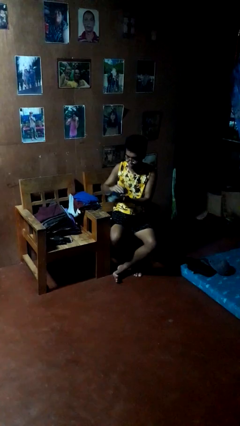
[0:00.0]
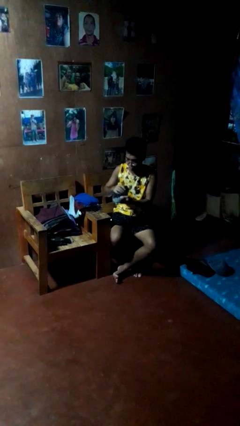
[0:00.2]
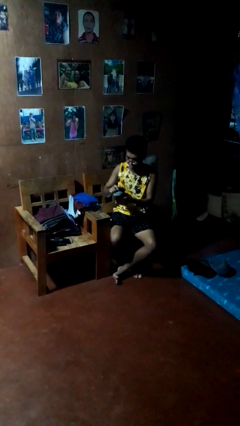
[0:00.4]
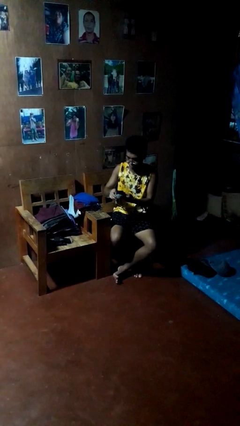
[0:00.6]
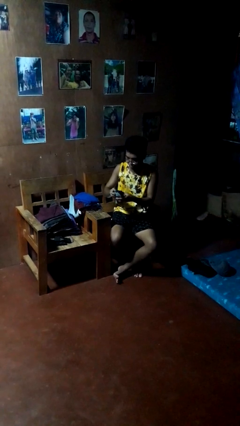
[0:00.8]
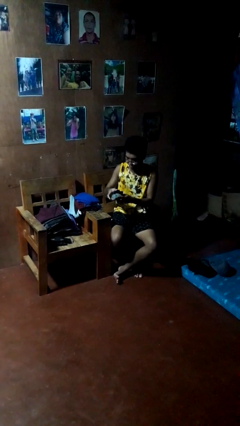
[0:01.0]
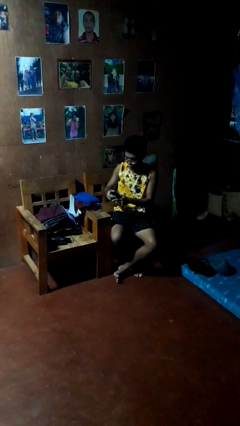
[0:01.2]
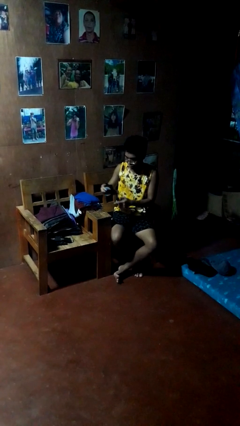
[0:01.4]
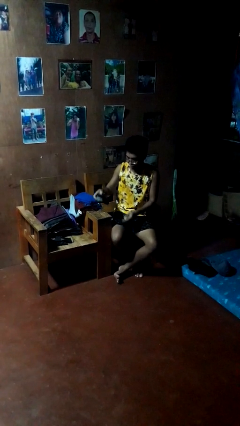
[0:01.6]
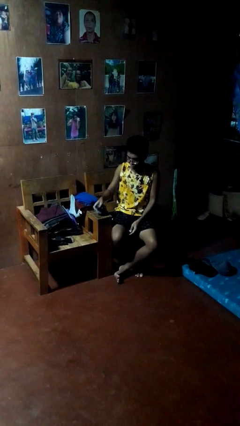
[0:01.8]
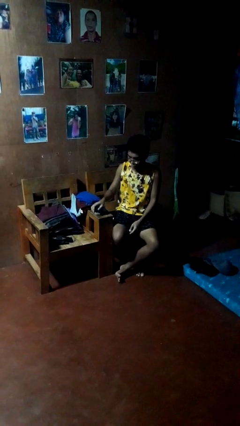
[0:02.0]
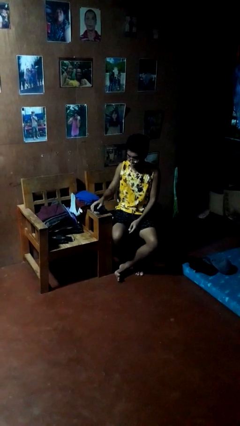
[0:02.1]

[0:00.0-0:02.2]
person folds socks

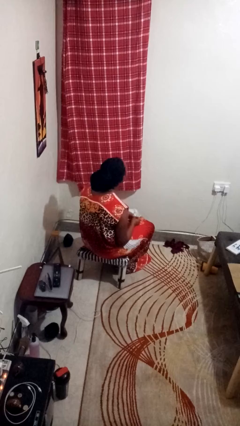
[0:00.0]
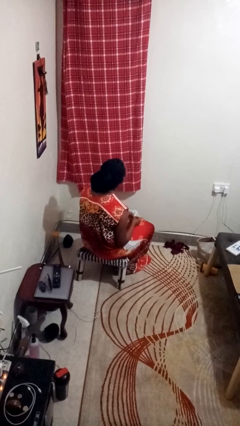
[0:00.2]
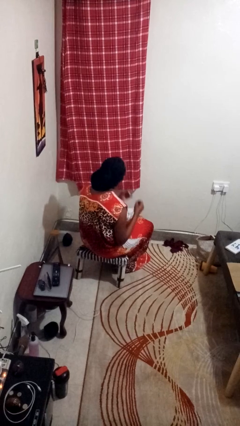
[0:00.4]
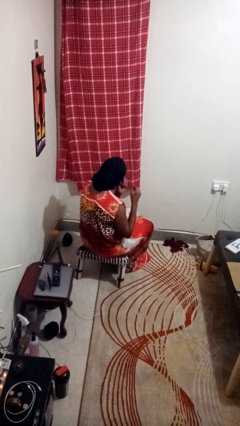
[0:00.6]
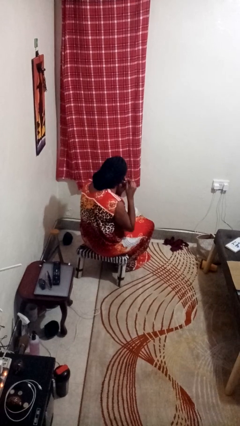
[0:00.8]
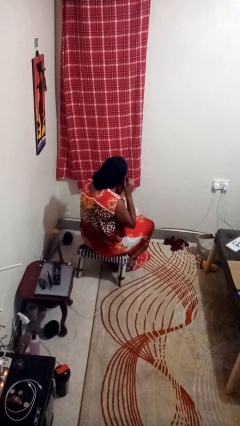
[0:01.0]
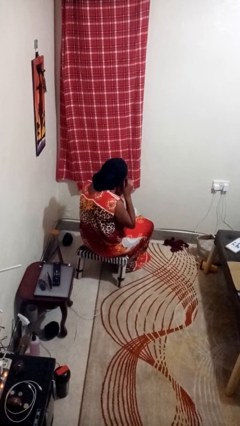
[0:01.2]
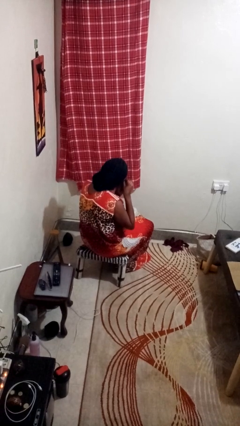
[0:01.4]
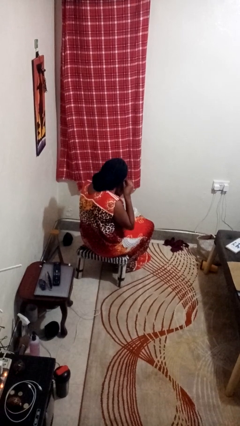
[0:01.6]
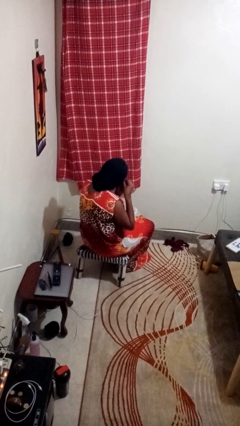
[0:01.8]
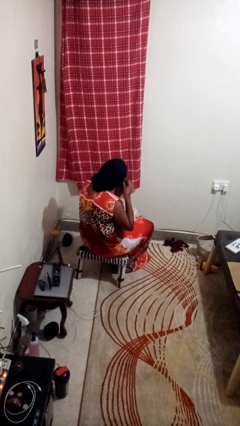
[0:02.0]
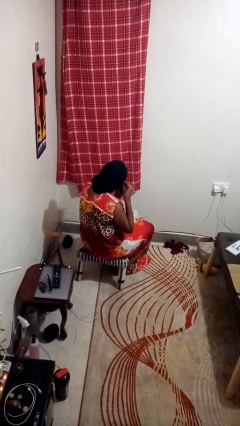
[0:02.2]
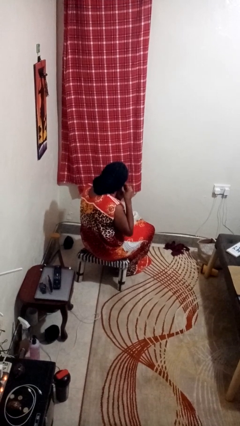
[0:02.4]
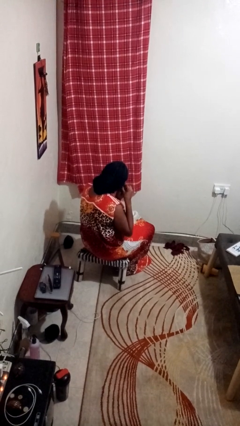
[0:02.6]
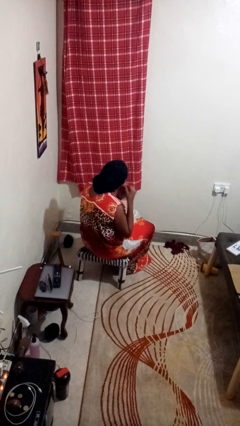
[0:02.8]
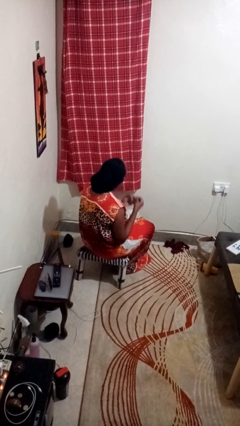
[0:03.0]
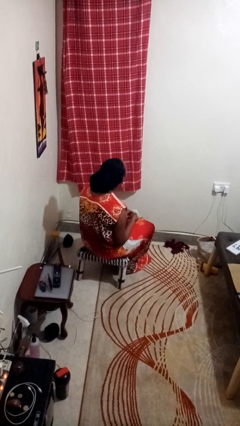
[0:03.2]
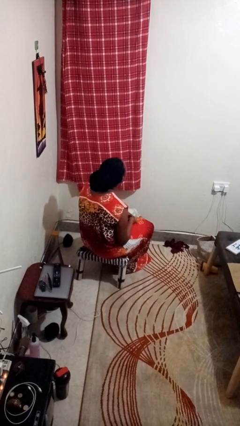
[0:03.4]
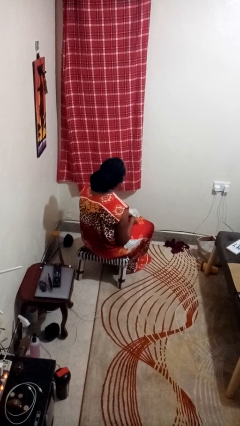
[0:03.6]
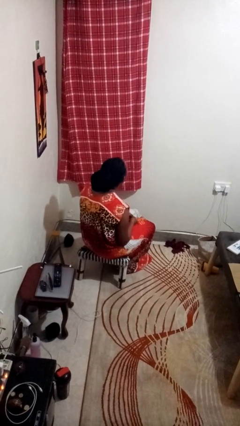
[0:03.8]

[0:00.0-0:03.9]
person puts on earrings

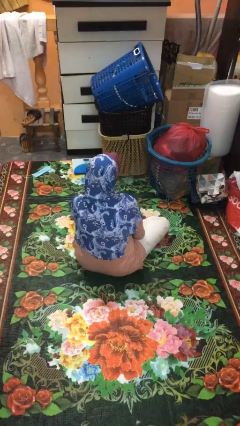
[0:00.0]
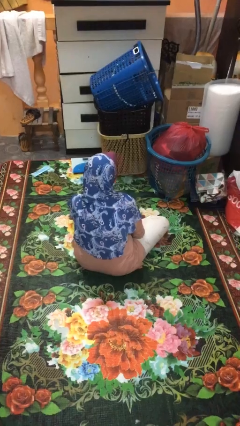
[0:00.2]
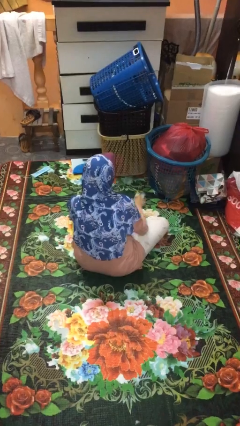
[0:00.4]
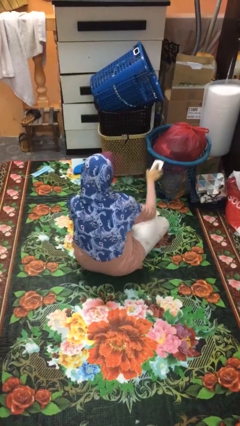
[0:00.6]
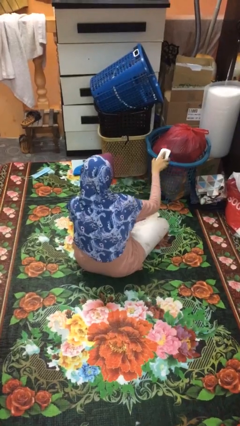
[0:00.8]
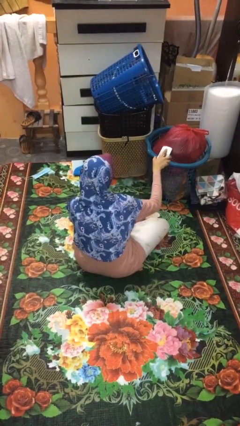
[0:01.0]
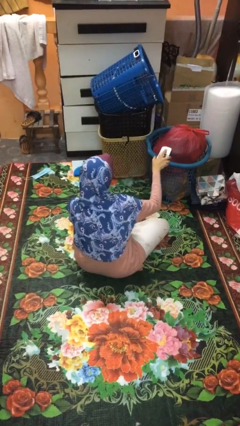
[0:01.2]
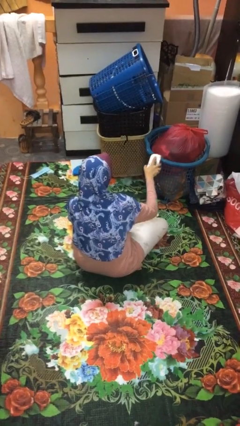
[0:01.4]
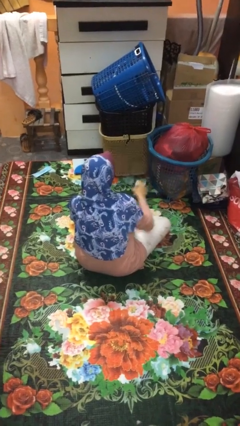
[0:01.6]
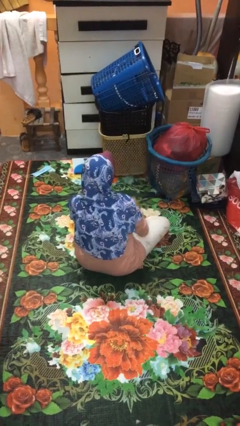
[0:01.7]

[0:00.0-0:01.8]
person uses television remote

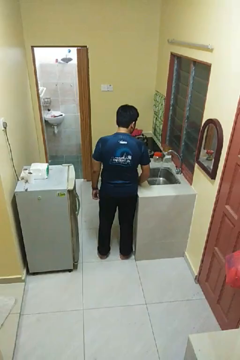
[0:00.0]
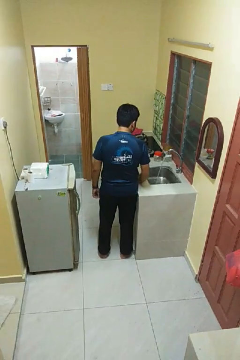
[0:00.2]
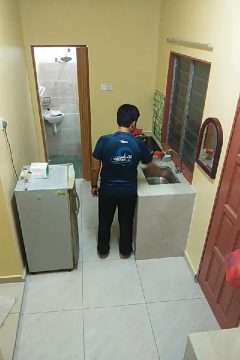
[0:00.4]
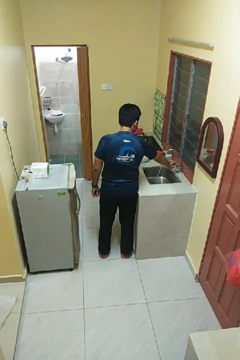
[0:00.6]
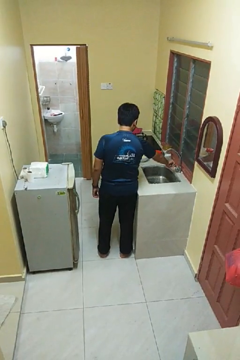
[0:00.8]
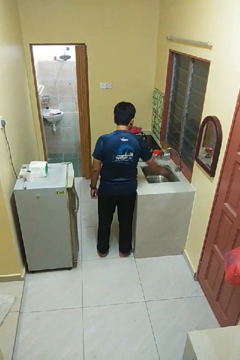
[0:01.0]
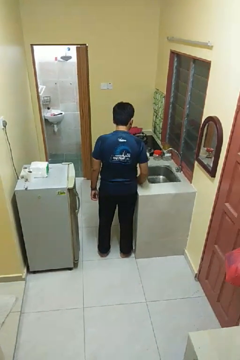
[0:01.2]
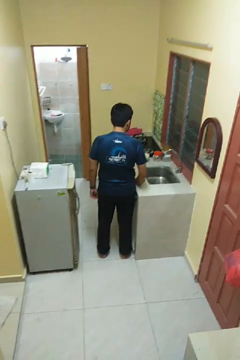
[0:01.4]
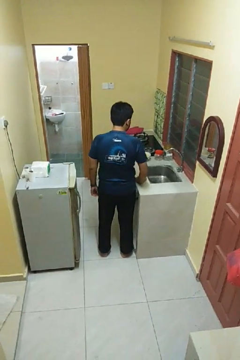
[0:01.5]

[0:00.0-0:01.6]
person turns off faucet

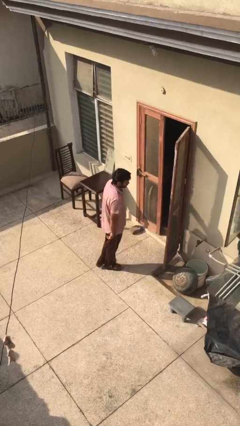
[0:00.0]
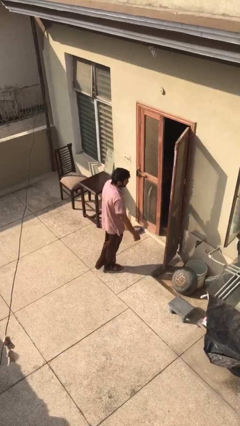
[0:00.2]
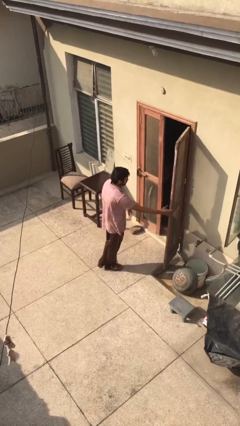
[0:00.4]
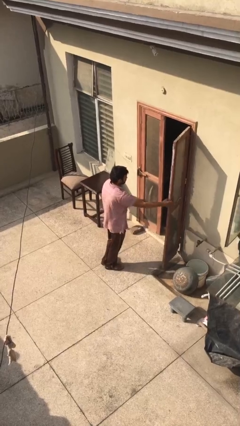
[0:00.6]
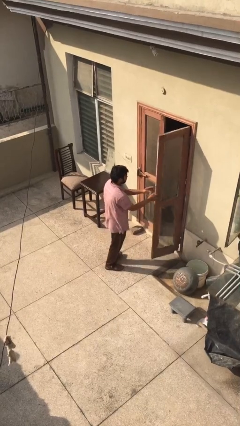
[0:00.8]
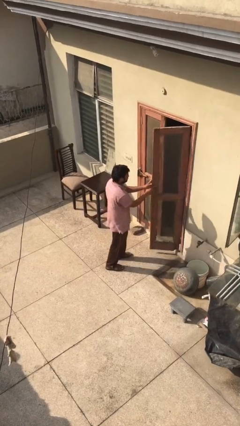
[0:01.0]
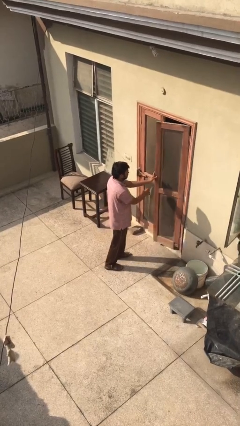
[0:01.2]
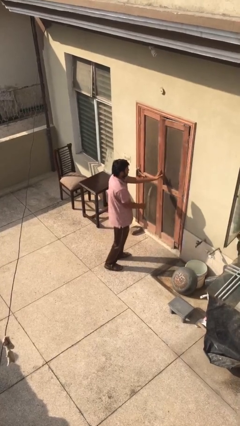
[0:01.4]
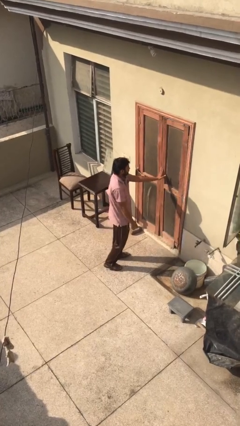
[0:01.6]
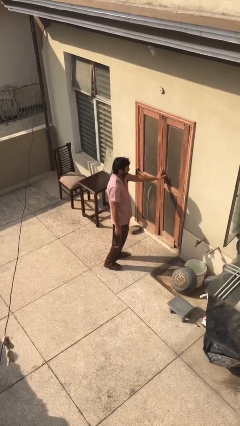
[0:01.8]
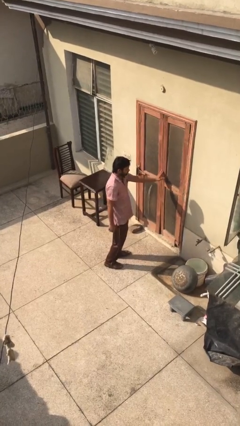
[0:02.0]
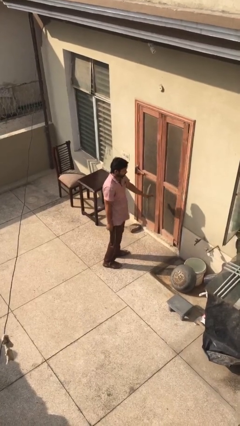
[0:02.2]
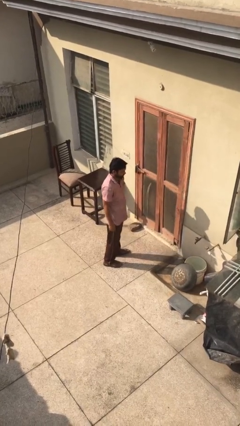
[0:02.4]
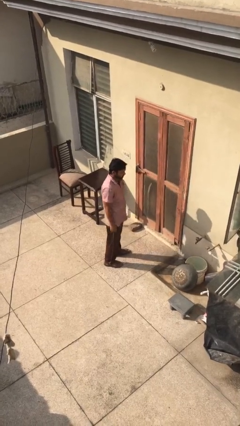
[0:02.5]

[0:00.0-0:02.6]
person closes facility door

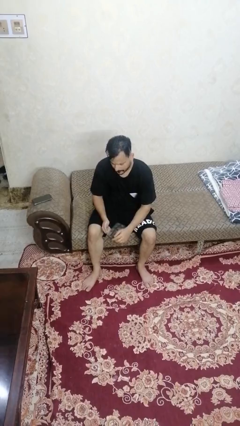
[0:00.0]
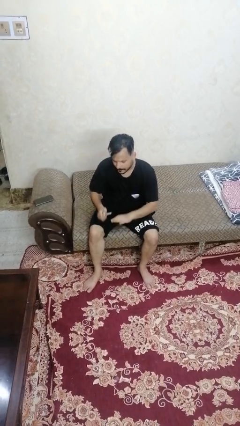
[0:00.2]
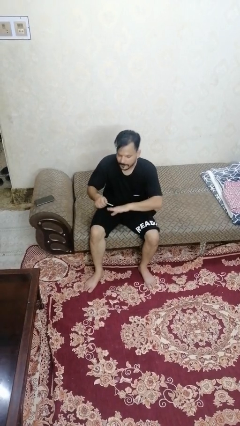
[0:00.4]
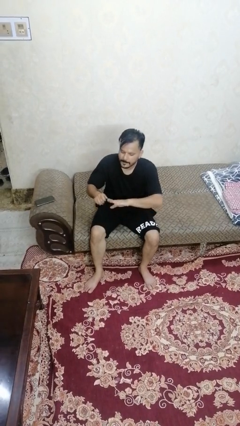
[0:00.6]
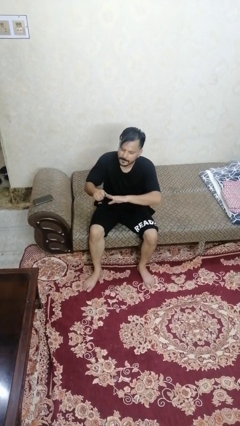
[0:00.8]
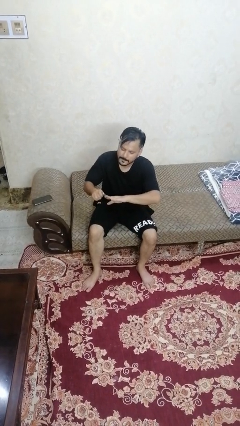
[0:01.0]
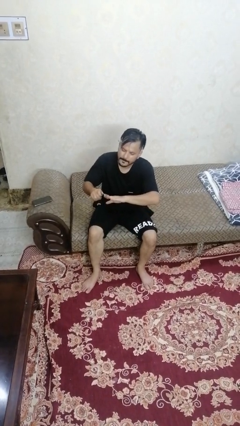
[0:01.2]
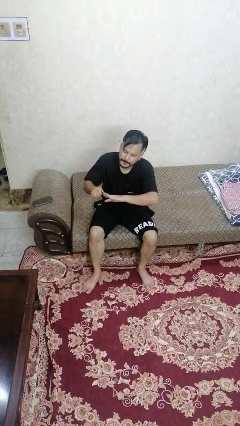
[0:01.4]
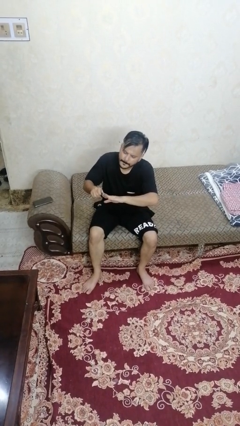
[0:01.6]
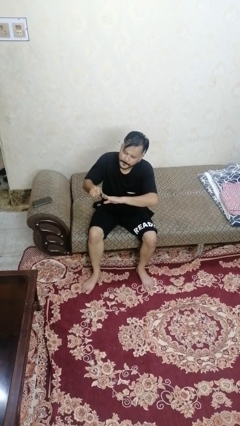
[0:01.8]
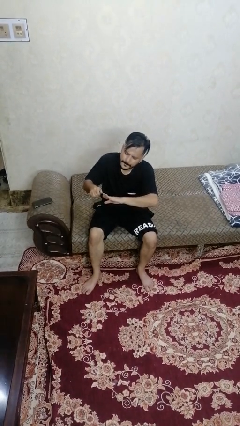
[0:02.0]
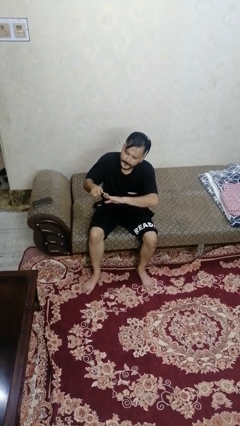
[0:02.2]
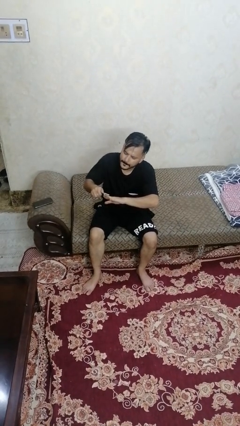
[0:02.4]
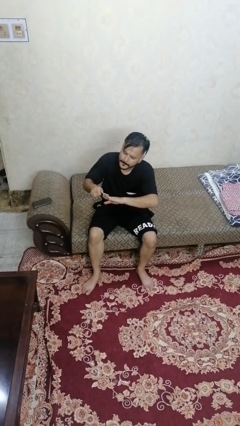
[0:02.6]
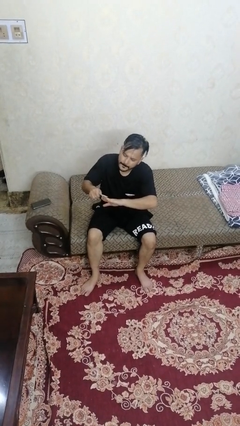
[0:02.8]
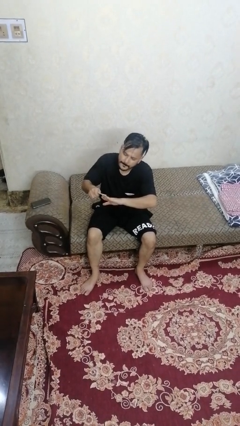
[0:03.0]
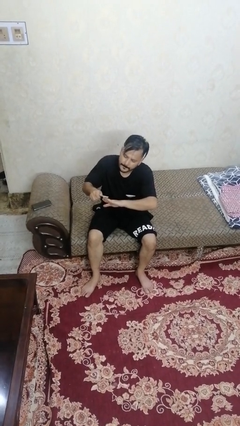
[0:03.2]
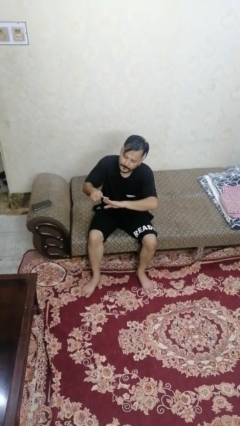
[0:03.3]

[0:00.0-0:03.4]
person files fingernails

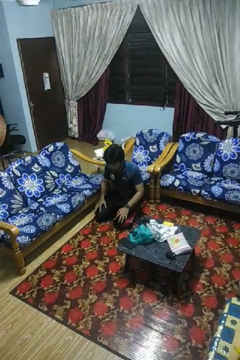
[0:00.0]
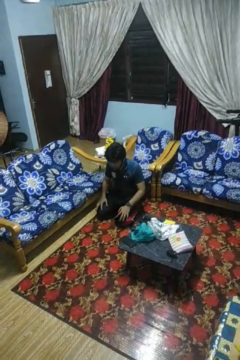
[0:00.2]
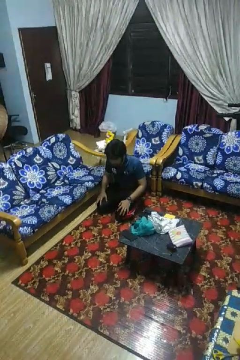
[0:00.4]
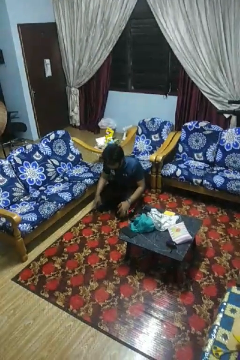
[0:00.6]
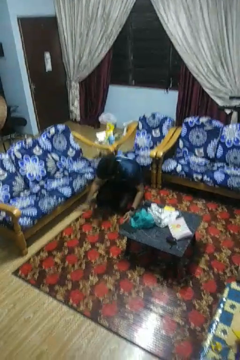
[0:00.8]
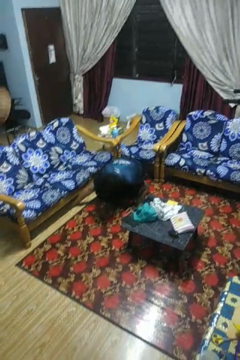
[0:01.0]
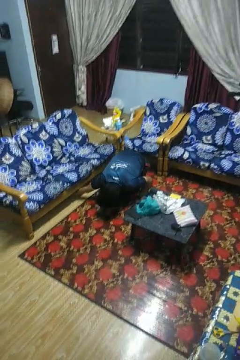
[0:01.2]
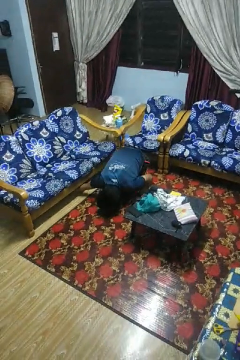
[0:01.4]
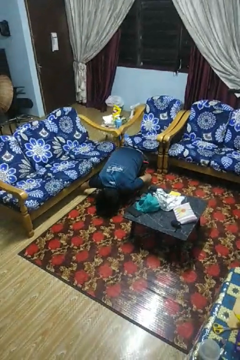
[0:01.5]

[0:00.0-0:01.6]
person searches under couch

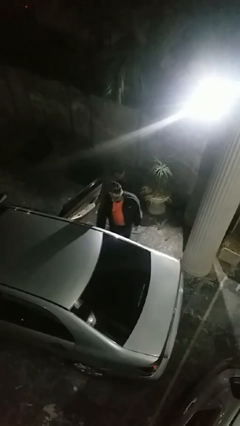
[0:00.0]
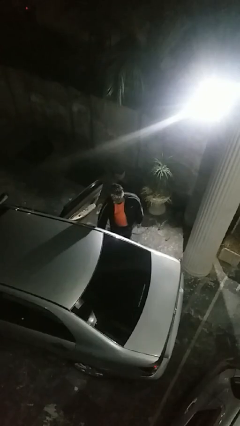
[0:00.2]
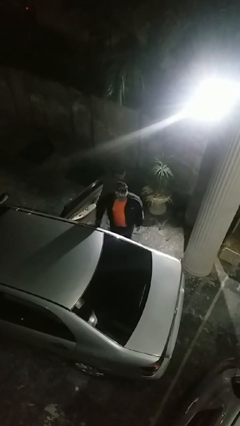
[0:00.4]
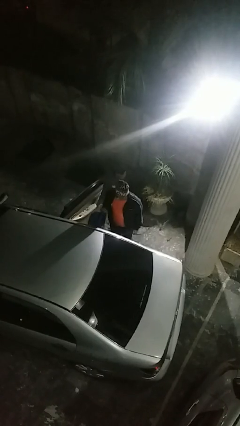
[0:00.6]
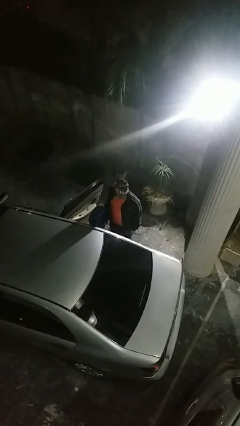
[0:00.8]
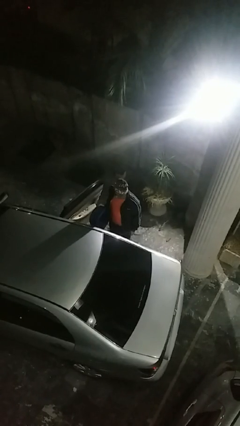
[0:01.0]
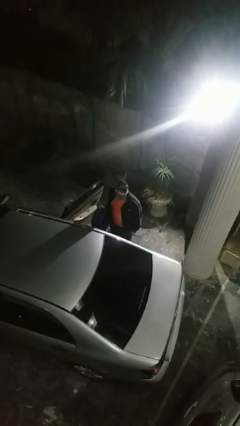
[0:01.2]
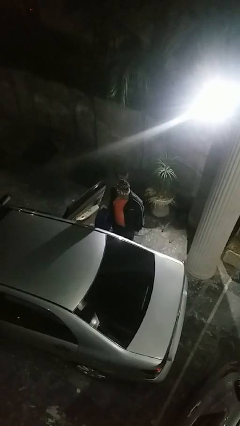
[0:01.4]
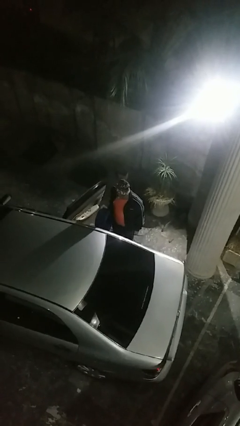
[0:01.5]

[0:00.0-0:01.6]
person unloads car
